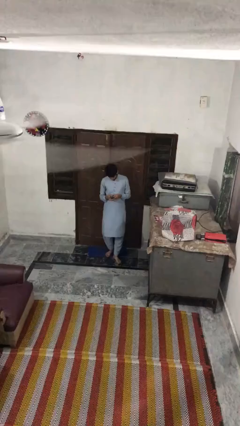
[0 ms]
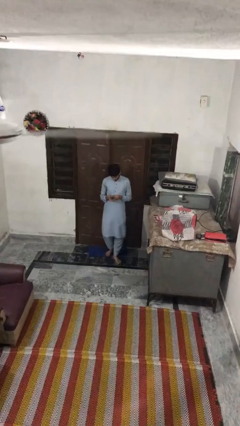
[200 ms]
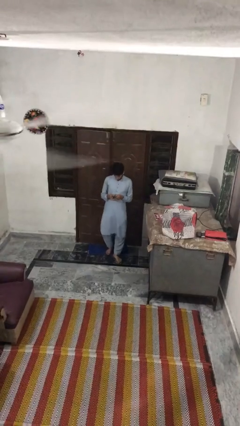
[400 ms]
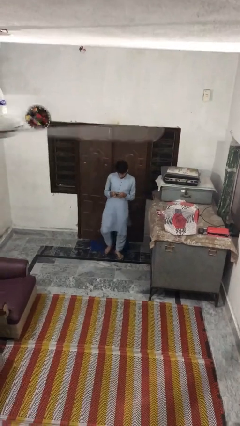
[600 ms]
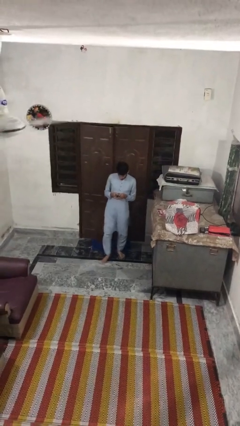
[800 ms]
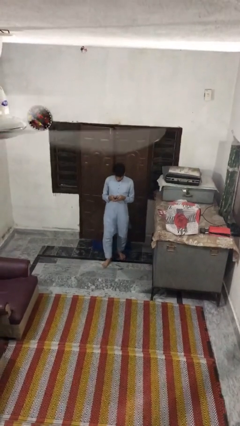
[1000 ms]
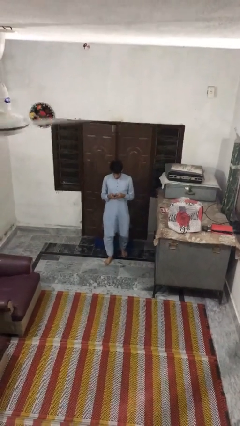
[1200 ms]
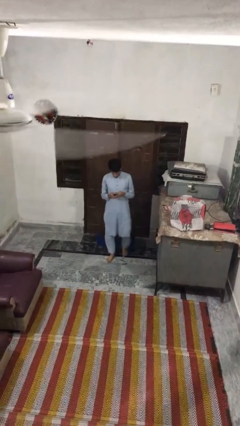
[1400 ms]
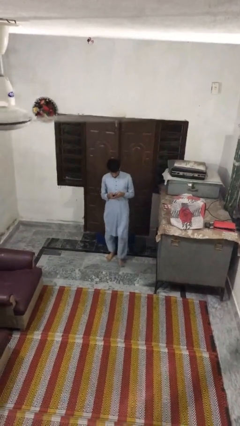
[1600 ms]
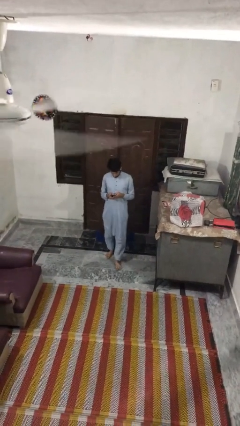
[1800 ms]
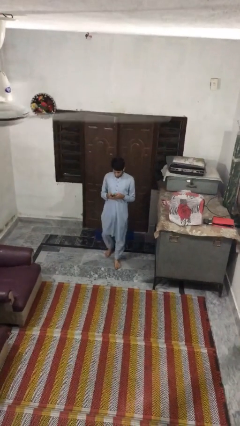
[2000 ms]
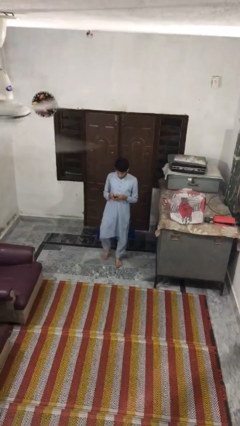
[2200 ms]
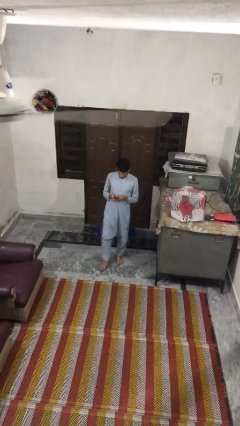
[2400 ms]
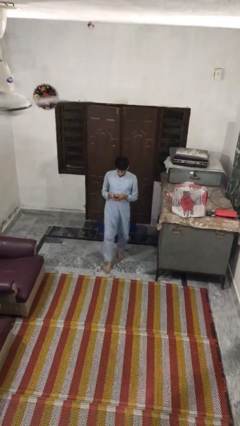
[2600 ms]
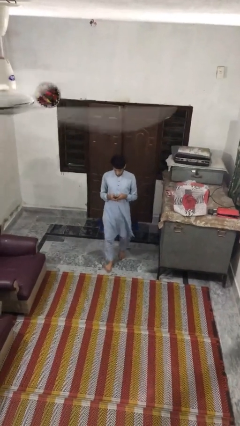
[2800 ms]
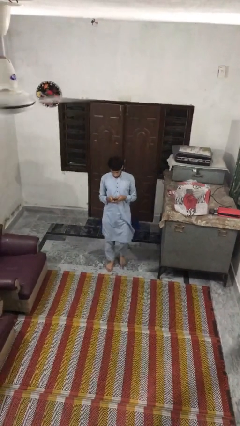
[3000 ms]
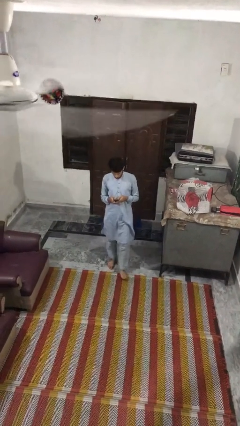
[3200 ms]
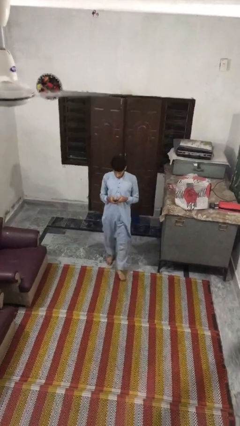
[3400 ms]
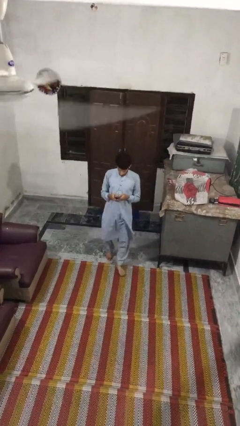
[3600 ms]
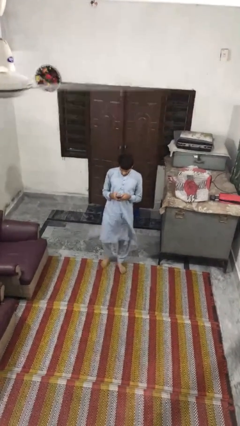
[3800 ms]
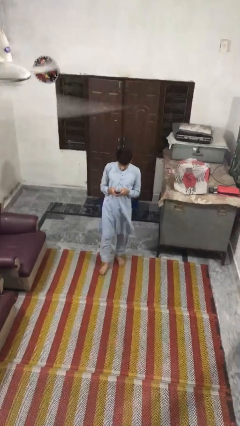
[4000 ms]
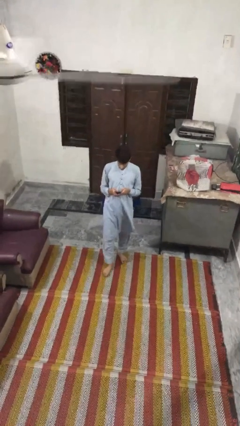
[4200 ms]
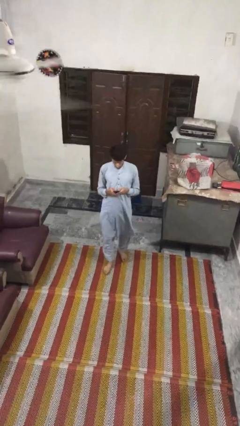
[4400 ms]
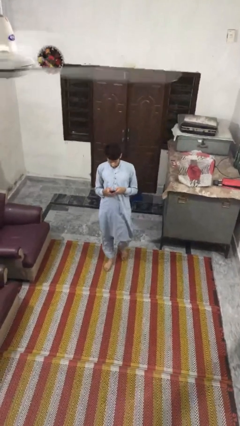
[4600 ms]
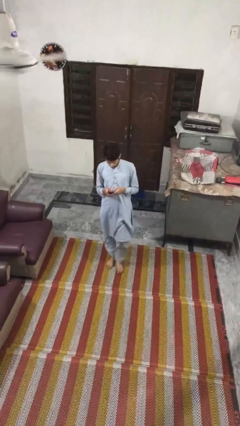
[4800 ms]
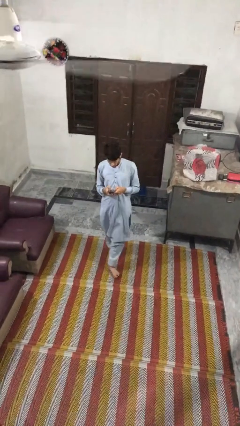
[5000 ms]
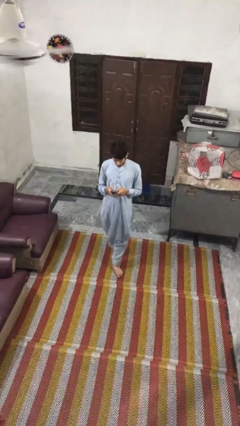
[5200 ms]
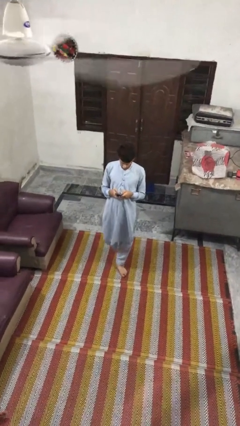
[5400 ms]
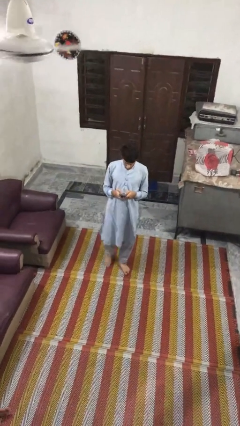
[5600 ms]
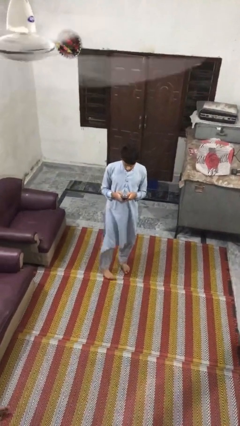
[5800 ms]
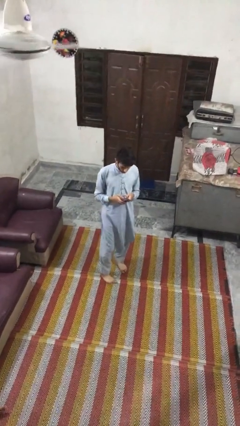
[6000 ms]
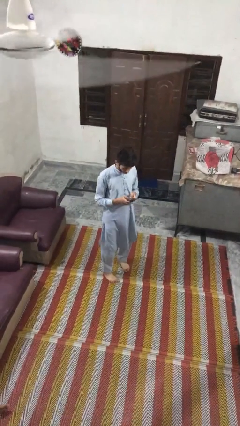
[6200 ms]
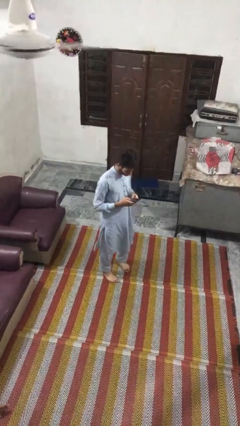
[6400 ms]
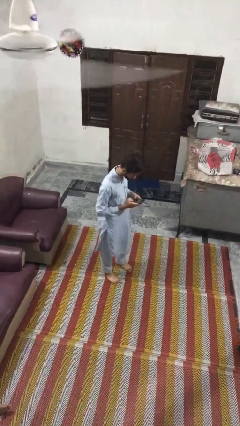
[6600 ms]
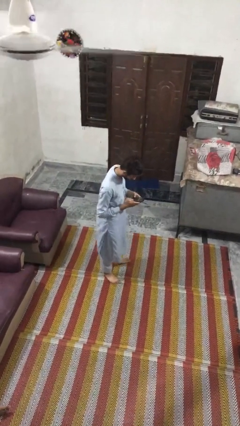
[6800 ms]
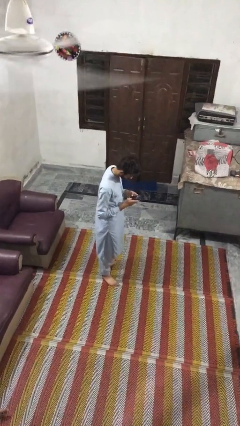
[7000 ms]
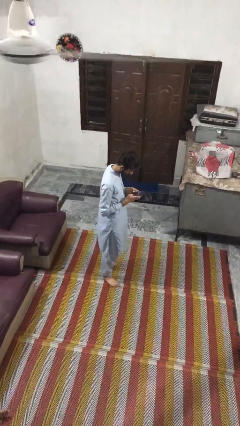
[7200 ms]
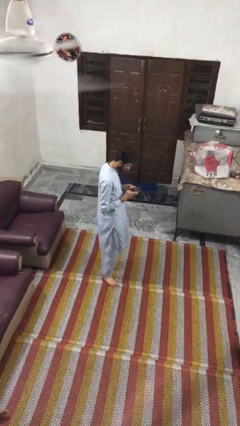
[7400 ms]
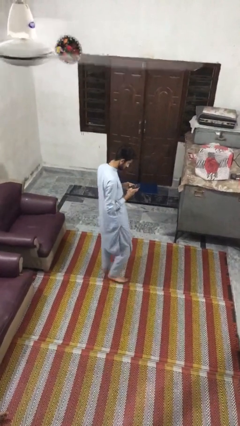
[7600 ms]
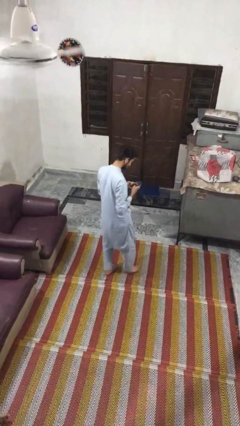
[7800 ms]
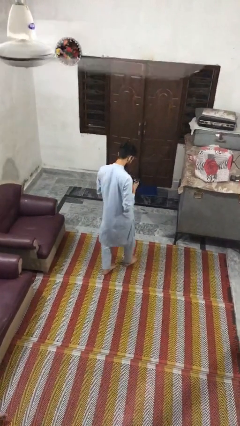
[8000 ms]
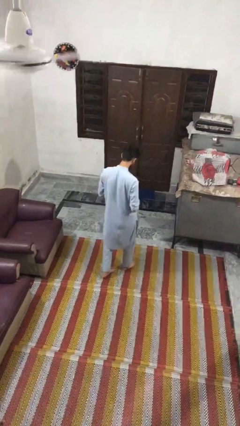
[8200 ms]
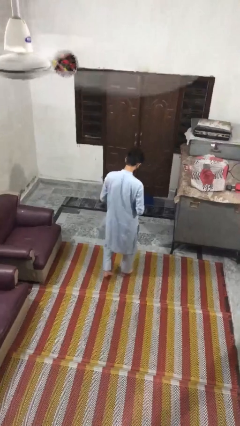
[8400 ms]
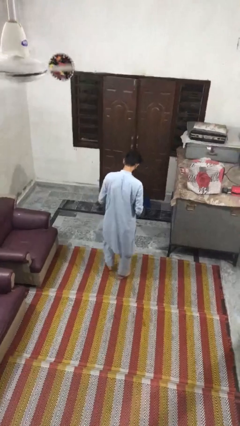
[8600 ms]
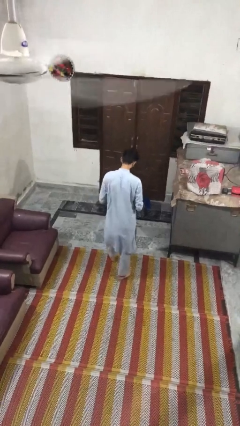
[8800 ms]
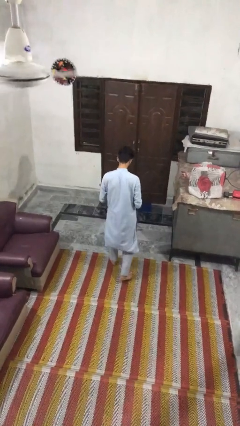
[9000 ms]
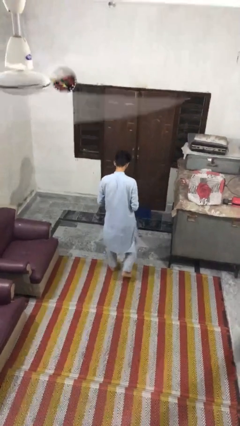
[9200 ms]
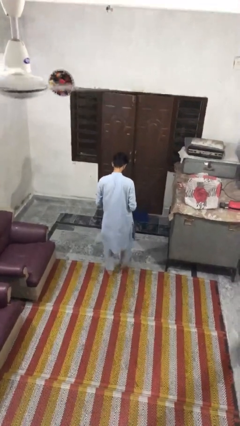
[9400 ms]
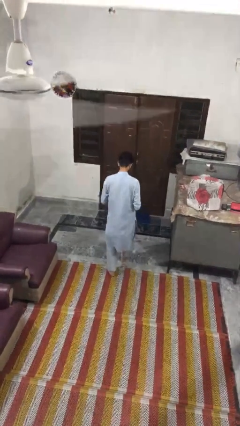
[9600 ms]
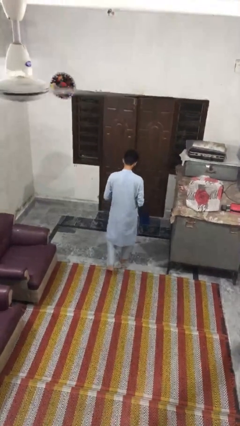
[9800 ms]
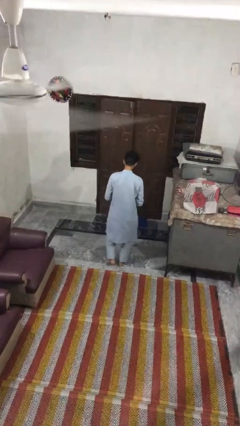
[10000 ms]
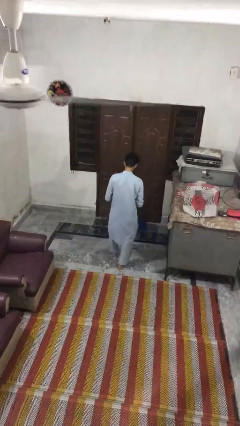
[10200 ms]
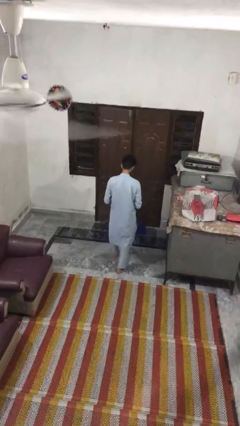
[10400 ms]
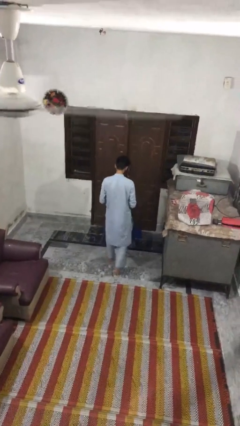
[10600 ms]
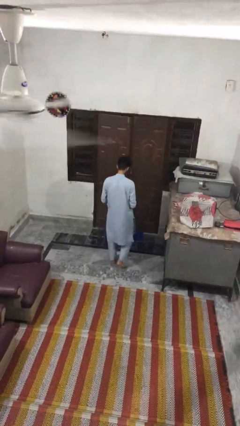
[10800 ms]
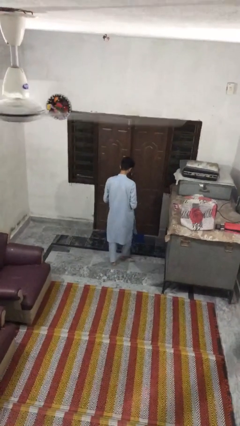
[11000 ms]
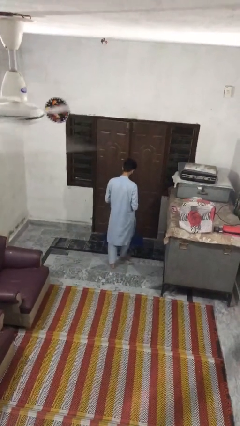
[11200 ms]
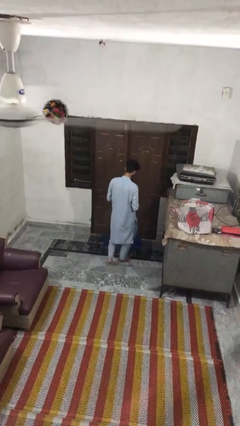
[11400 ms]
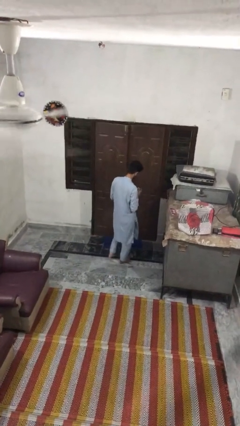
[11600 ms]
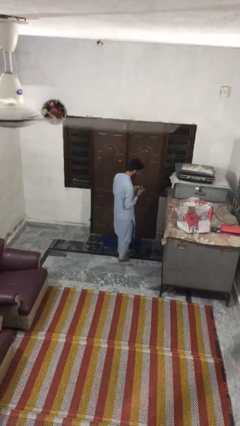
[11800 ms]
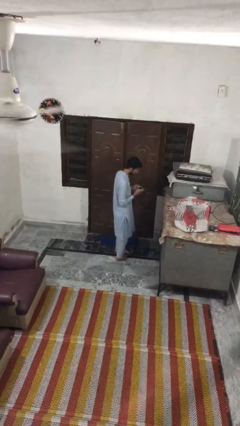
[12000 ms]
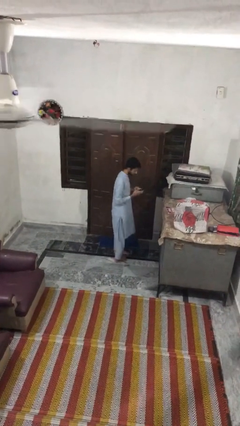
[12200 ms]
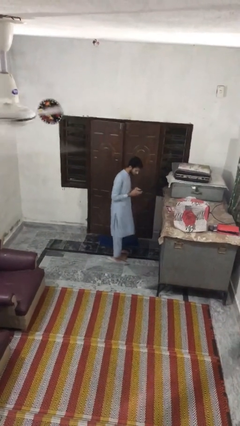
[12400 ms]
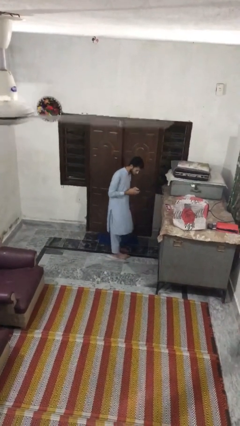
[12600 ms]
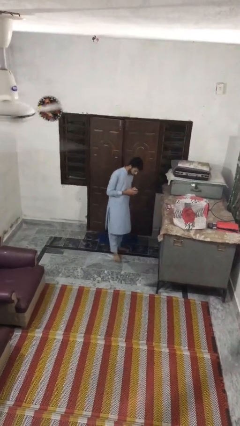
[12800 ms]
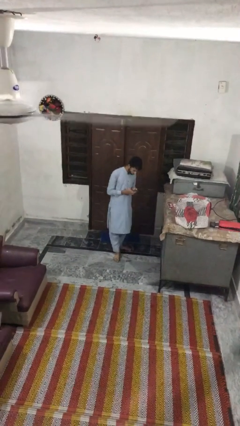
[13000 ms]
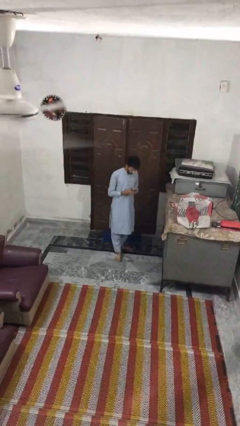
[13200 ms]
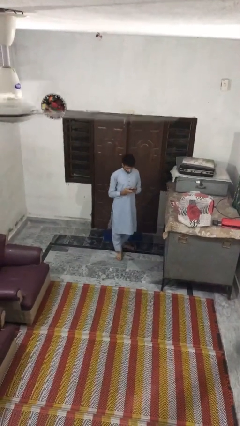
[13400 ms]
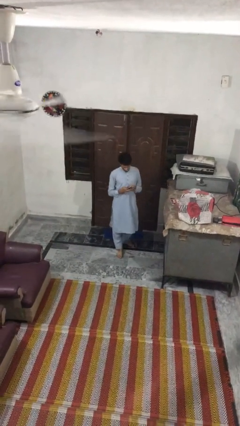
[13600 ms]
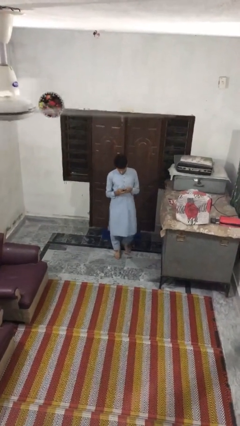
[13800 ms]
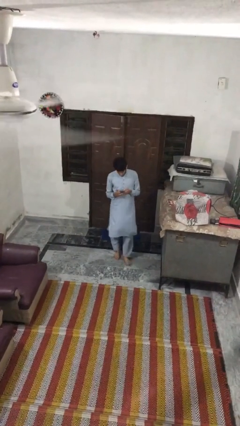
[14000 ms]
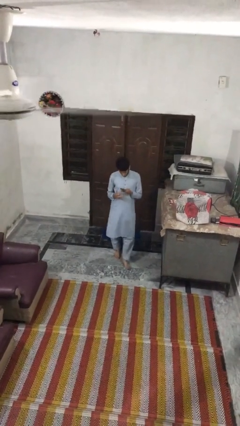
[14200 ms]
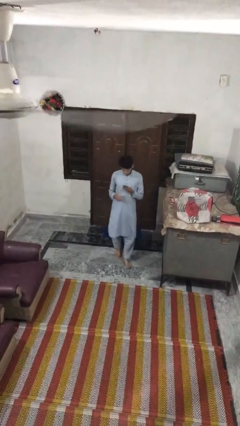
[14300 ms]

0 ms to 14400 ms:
person texts on phone

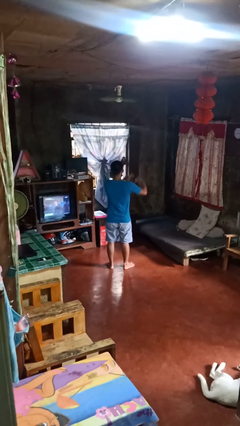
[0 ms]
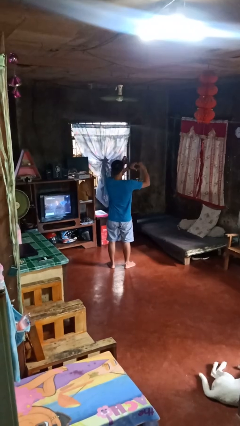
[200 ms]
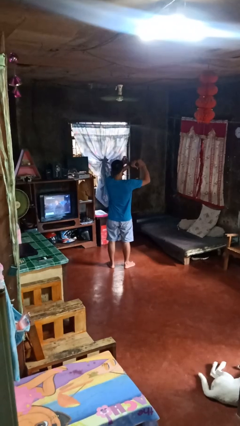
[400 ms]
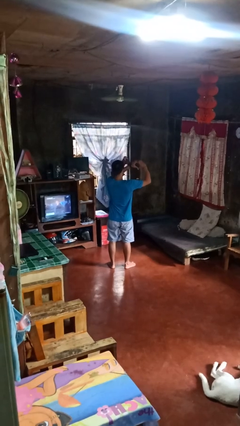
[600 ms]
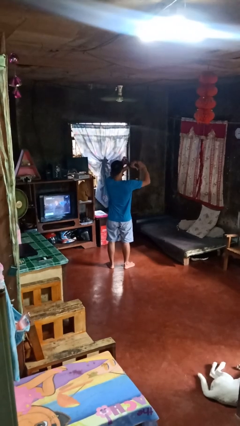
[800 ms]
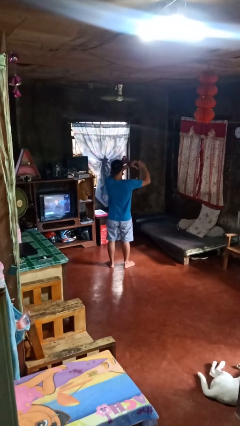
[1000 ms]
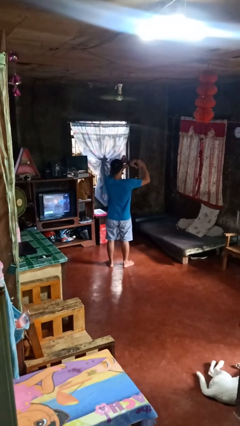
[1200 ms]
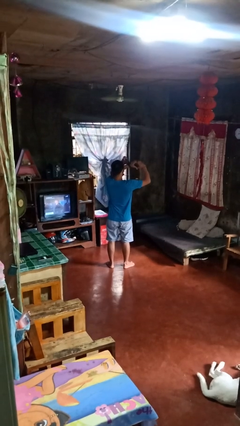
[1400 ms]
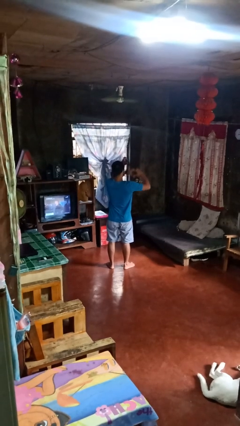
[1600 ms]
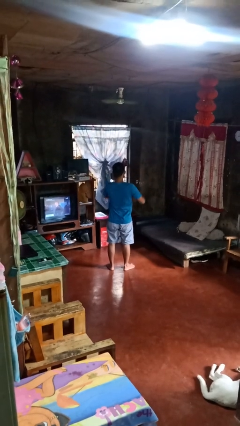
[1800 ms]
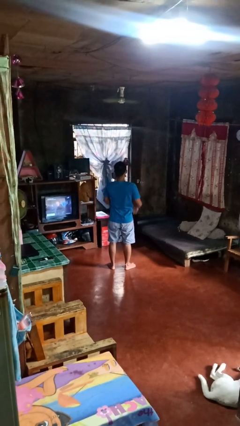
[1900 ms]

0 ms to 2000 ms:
person gestures heart

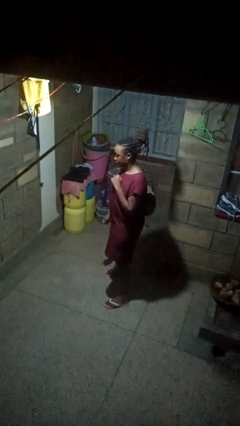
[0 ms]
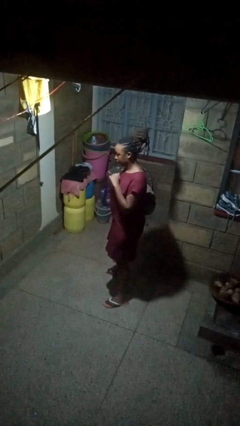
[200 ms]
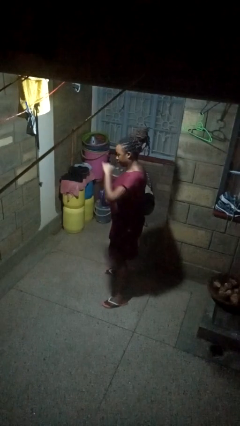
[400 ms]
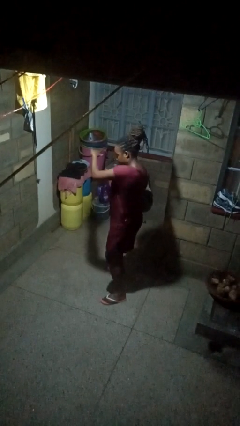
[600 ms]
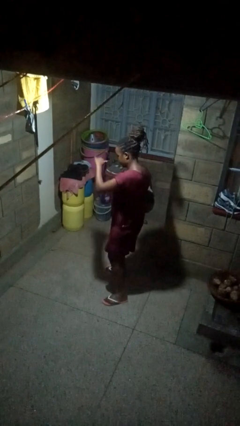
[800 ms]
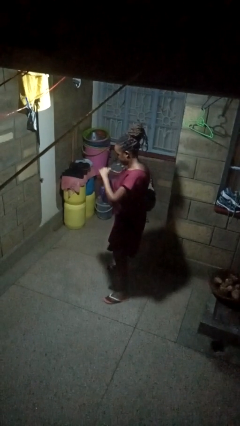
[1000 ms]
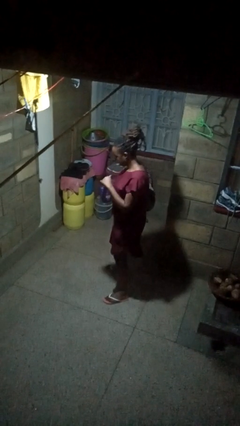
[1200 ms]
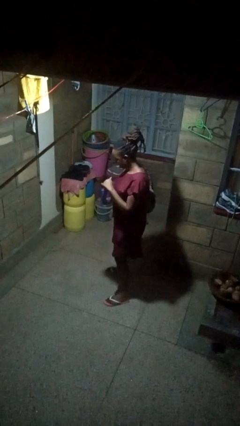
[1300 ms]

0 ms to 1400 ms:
person karate chop
